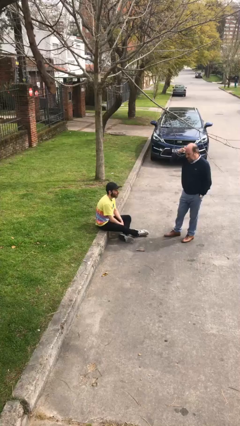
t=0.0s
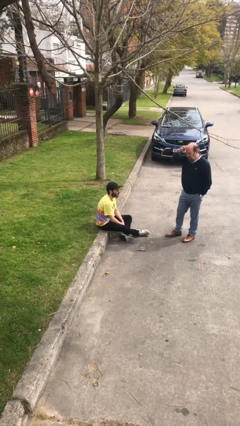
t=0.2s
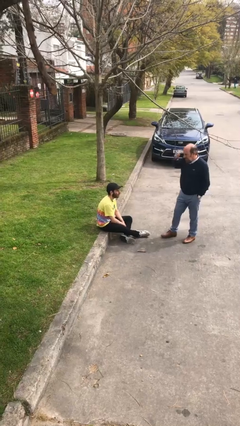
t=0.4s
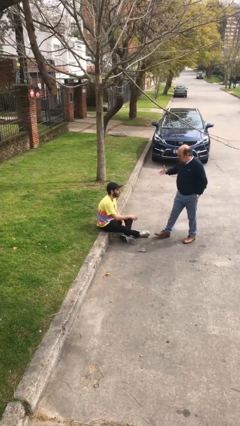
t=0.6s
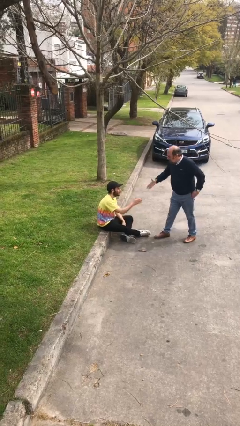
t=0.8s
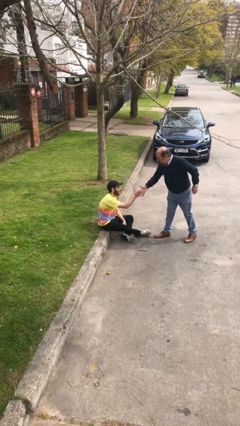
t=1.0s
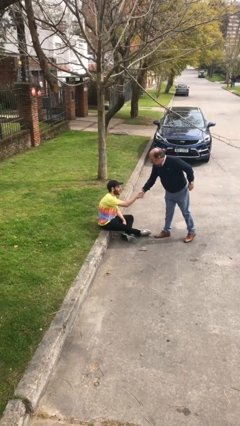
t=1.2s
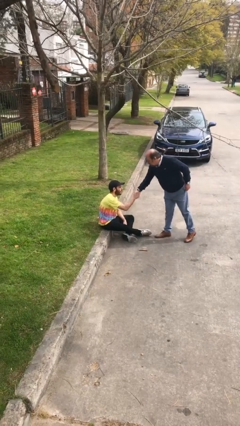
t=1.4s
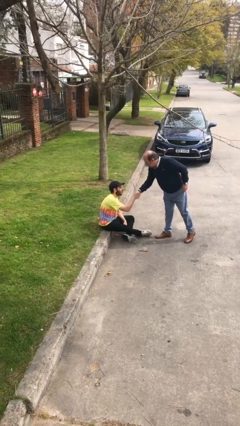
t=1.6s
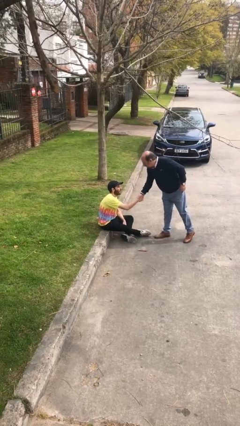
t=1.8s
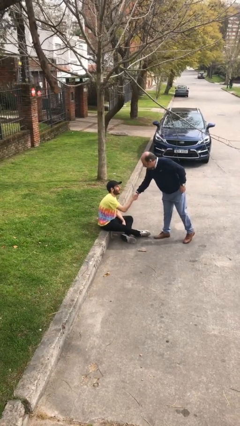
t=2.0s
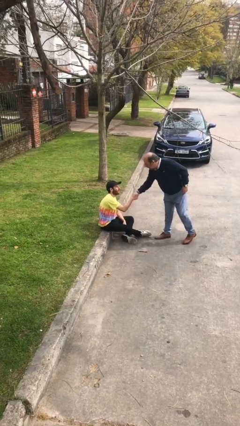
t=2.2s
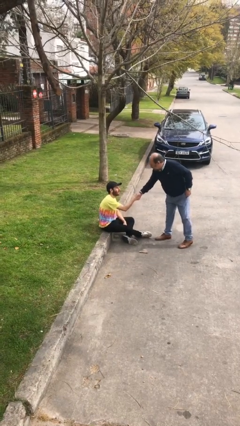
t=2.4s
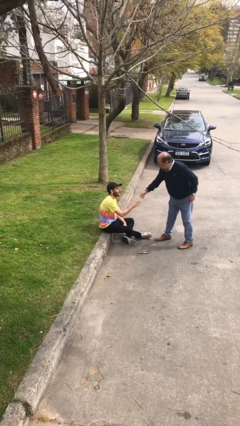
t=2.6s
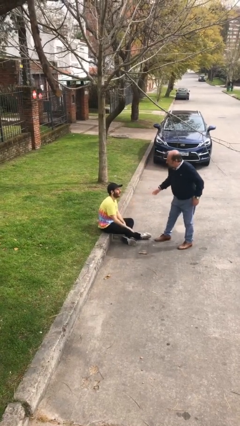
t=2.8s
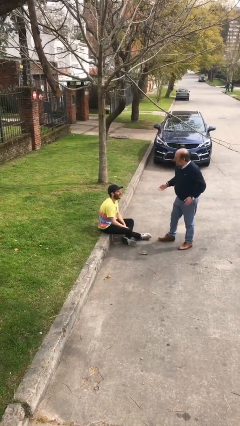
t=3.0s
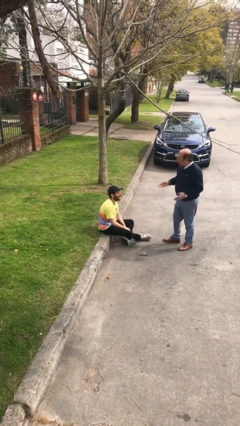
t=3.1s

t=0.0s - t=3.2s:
person shakes hand

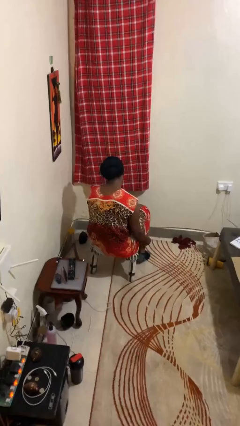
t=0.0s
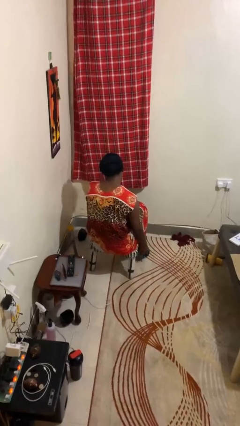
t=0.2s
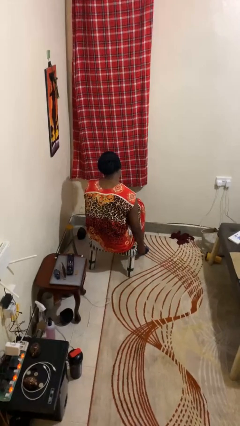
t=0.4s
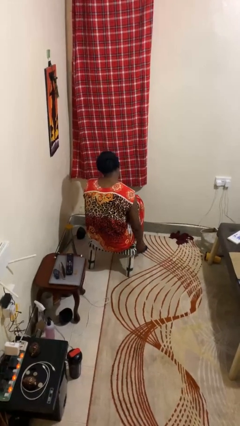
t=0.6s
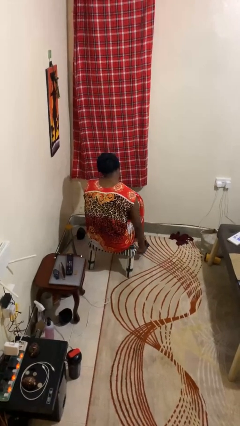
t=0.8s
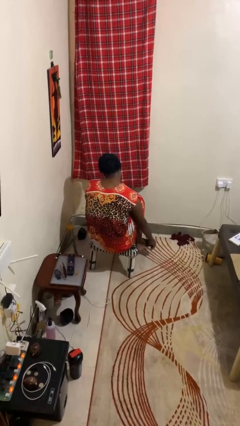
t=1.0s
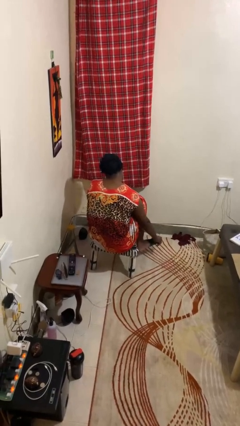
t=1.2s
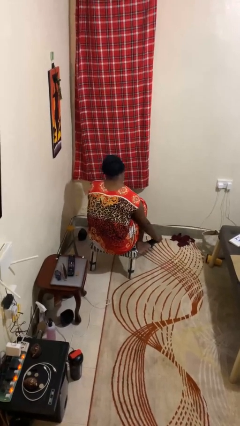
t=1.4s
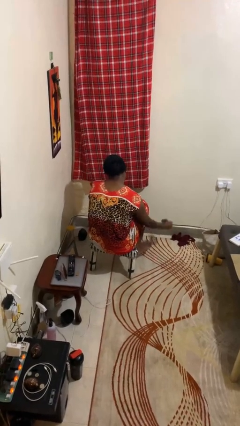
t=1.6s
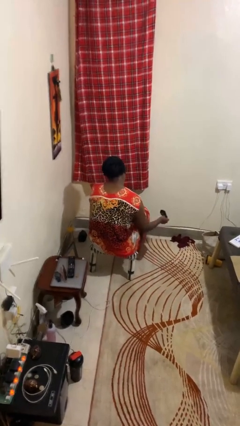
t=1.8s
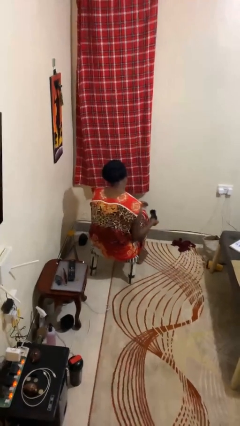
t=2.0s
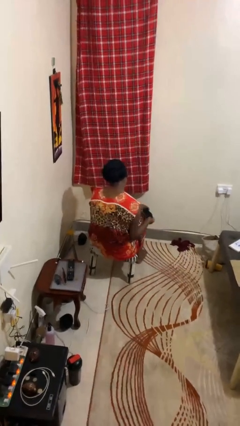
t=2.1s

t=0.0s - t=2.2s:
person takes off socks

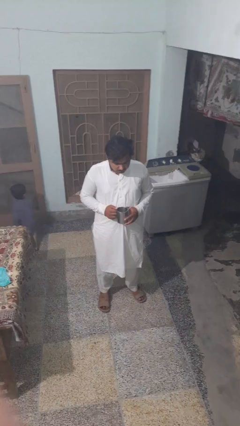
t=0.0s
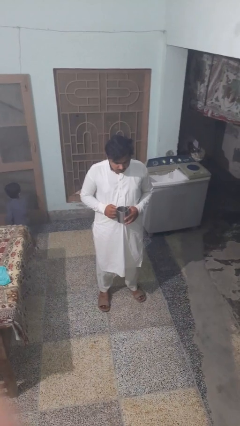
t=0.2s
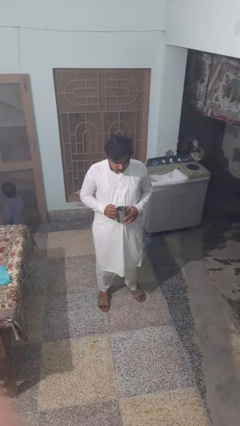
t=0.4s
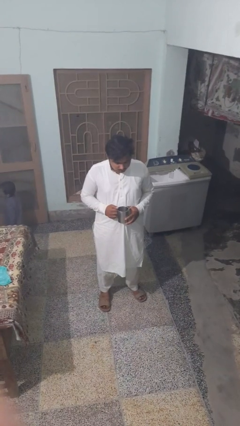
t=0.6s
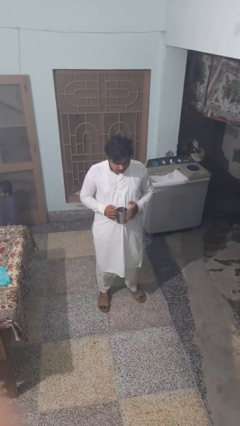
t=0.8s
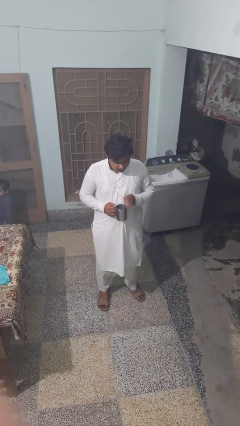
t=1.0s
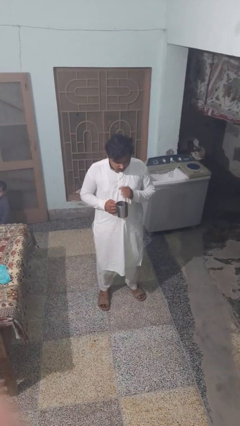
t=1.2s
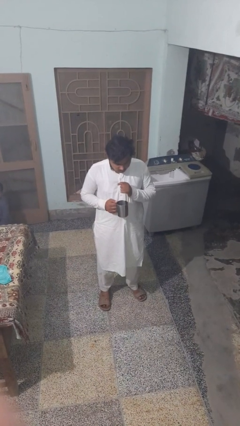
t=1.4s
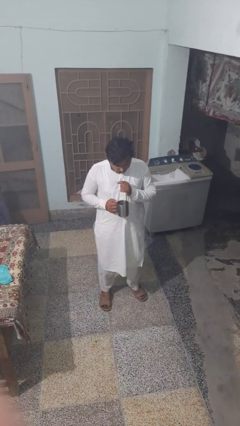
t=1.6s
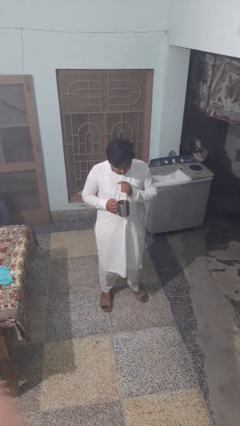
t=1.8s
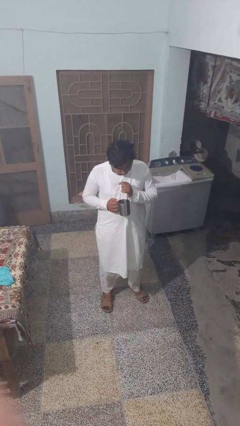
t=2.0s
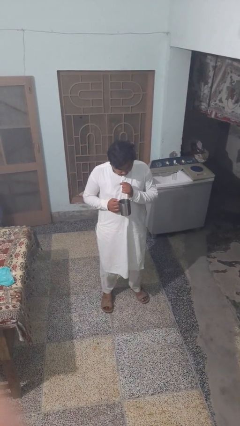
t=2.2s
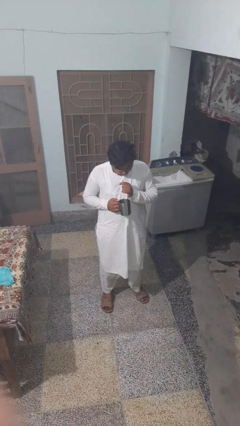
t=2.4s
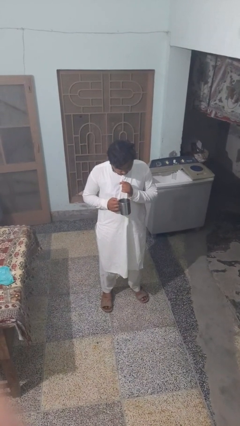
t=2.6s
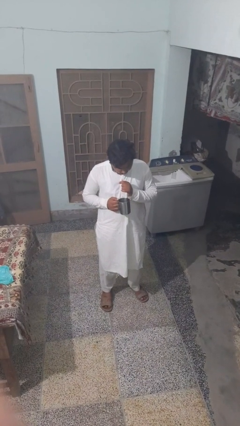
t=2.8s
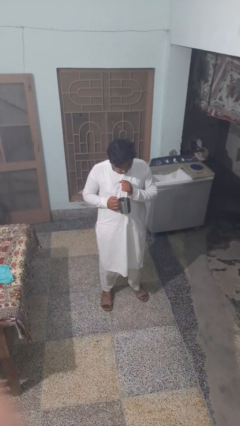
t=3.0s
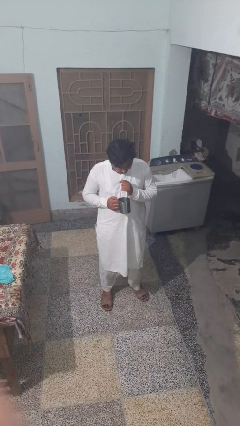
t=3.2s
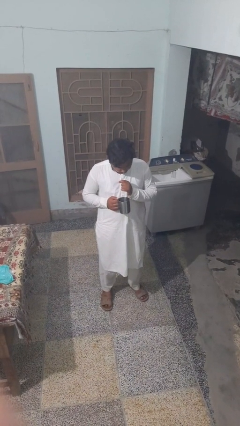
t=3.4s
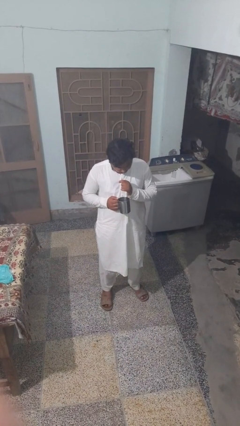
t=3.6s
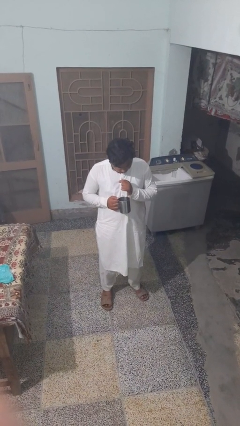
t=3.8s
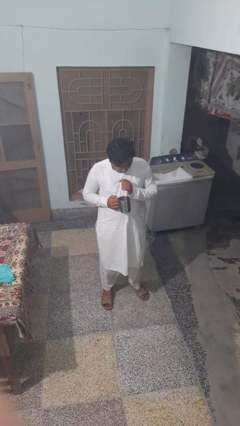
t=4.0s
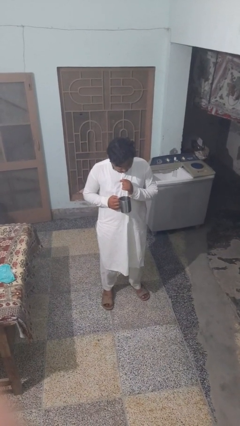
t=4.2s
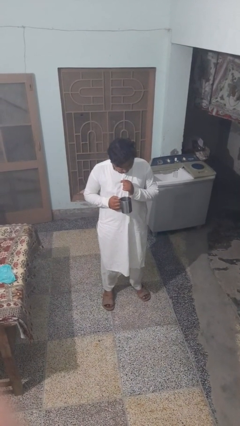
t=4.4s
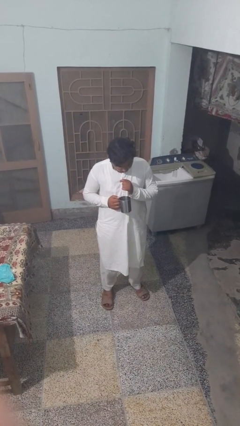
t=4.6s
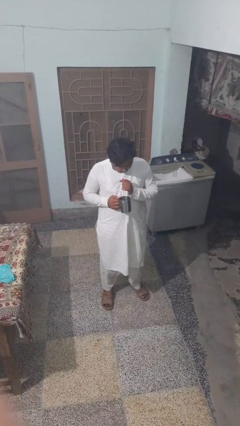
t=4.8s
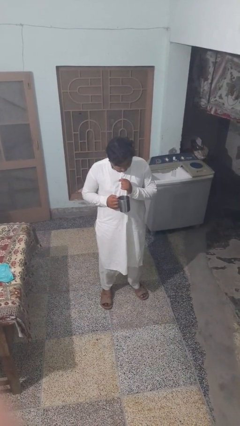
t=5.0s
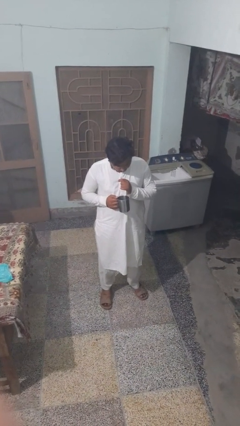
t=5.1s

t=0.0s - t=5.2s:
person drinks from straw

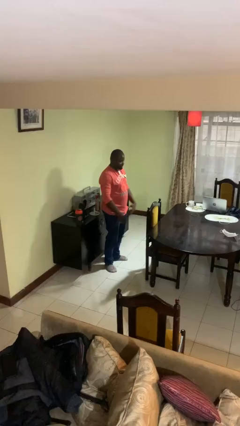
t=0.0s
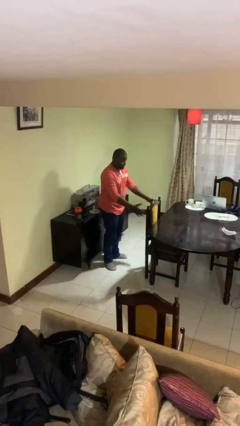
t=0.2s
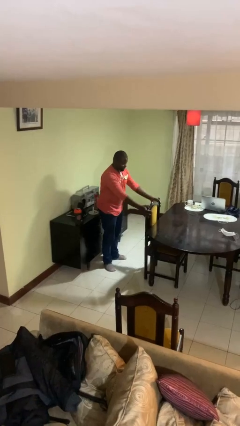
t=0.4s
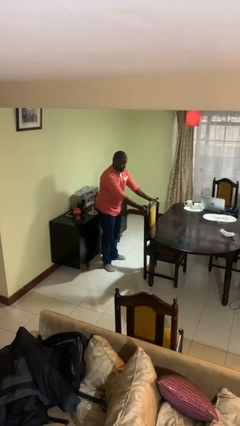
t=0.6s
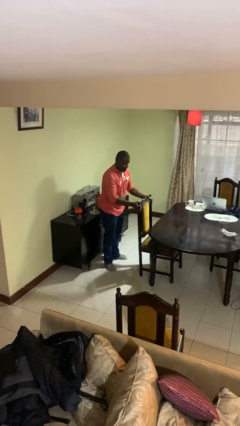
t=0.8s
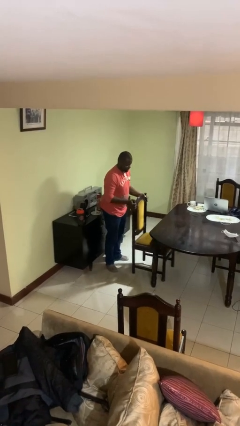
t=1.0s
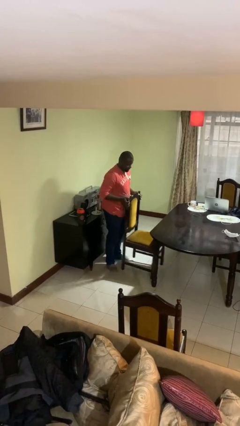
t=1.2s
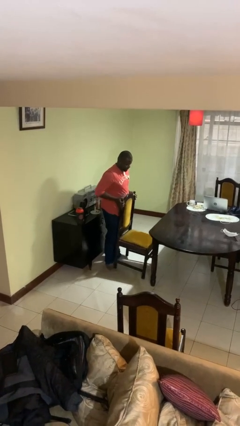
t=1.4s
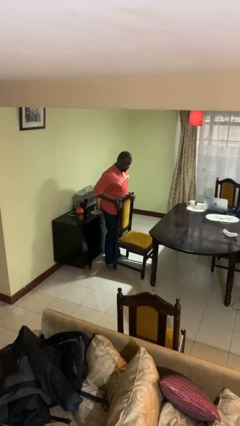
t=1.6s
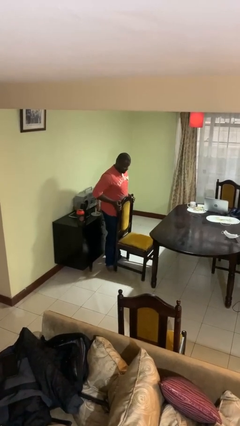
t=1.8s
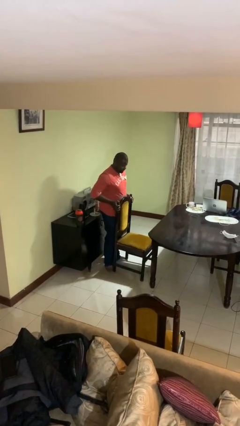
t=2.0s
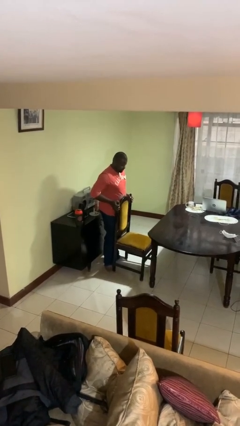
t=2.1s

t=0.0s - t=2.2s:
person pulls out chair

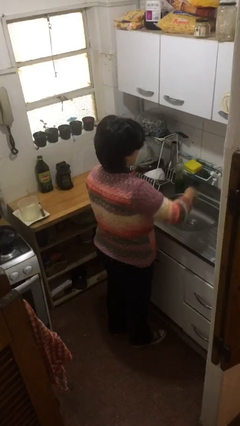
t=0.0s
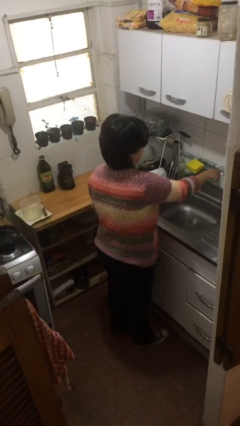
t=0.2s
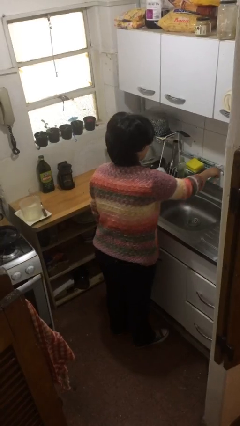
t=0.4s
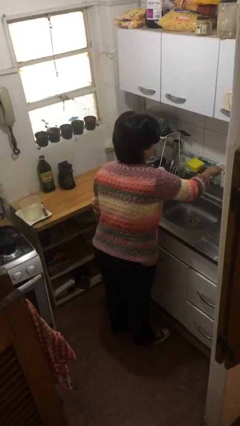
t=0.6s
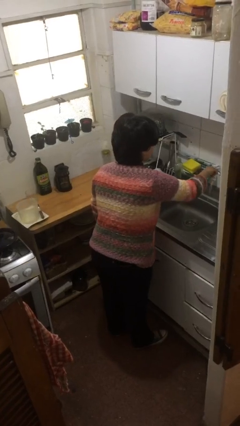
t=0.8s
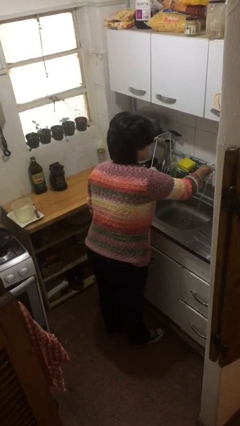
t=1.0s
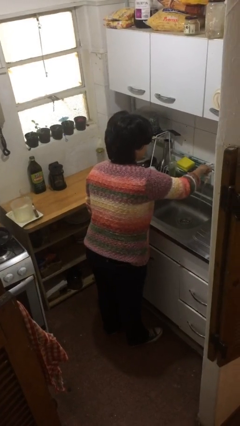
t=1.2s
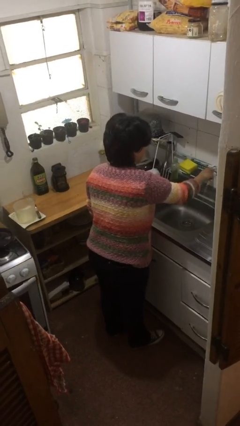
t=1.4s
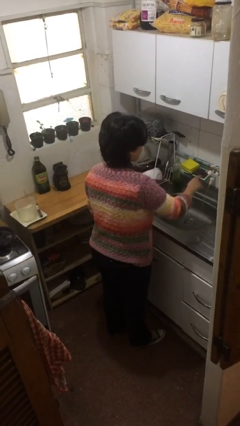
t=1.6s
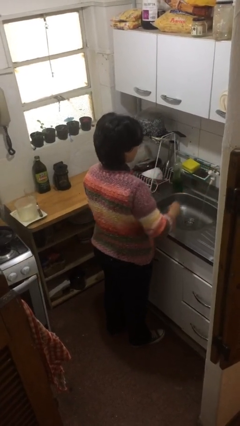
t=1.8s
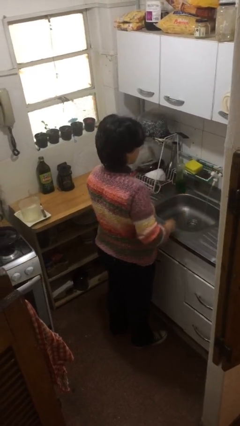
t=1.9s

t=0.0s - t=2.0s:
person turns on faucet

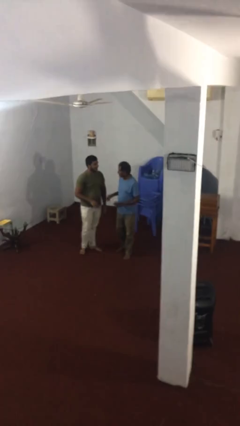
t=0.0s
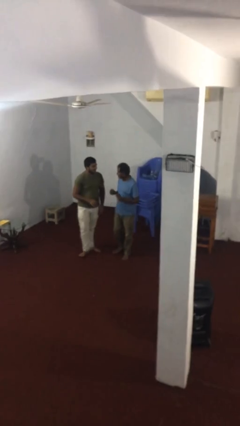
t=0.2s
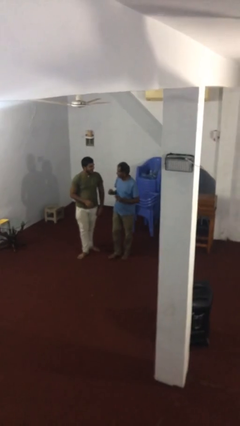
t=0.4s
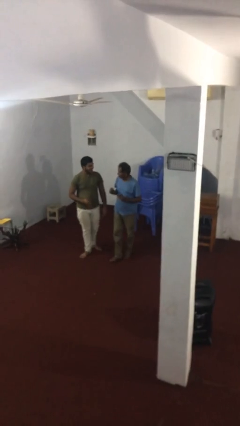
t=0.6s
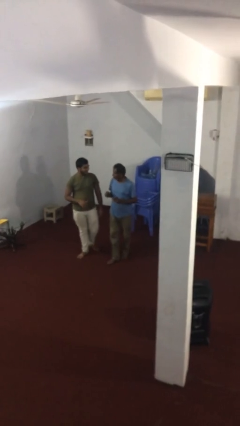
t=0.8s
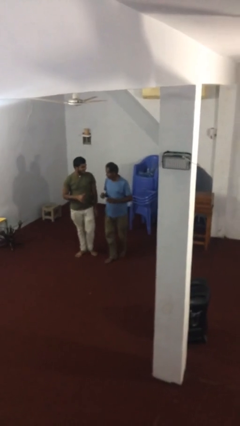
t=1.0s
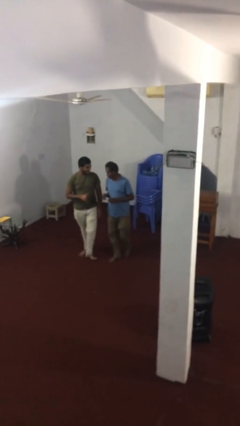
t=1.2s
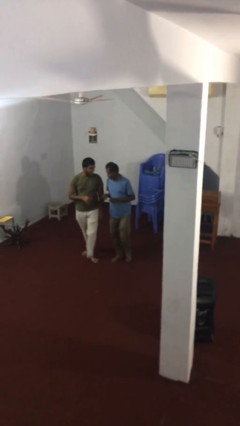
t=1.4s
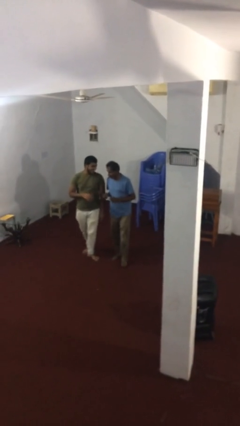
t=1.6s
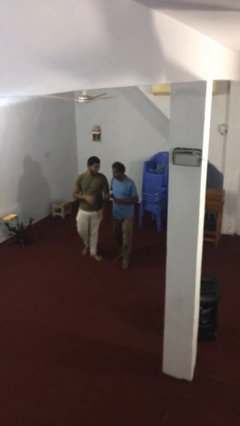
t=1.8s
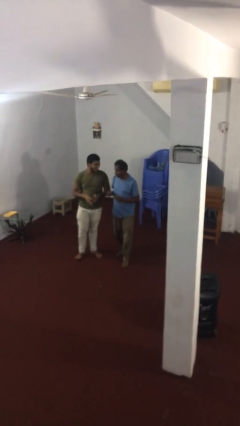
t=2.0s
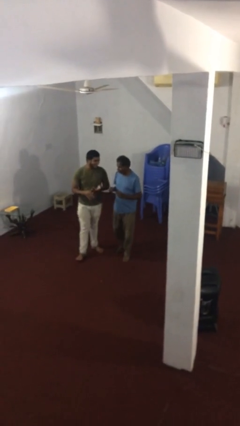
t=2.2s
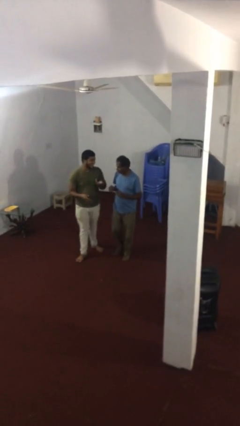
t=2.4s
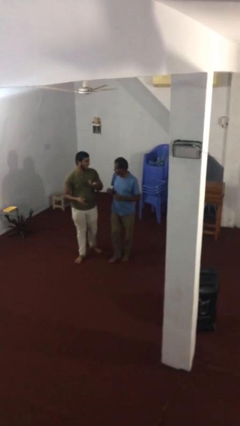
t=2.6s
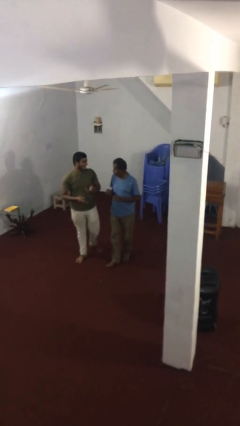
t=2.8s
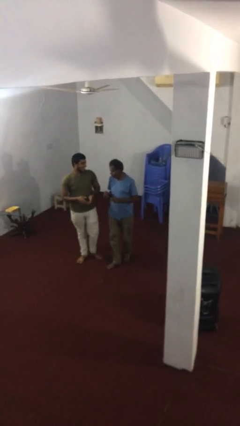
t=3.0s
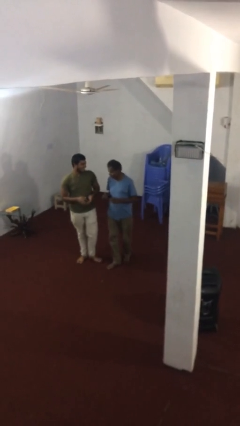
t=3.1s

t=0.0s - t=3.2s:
person talks to person
